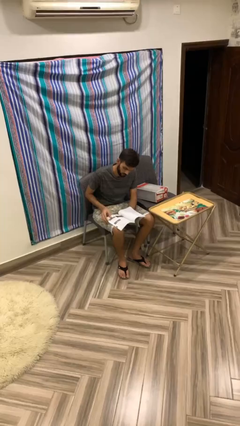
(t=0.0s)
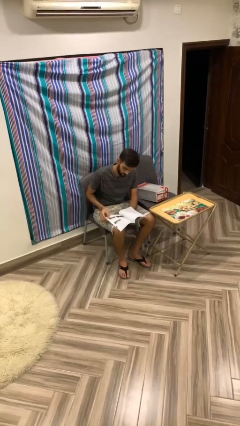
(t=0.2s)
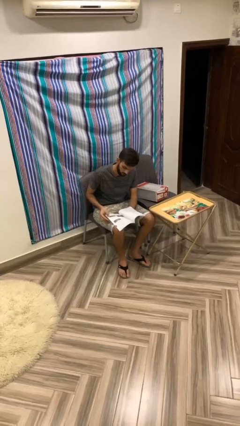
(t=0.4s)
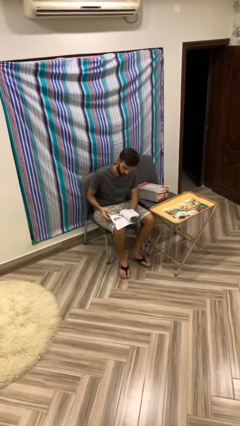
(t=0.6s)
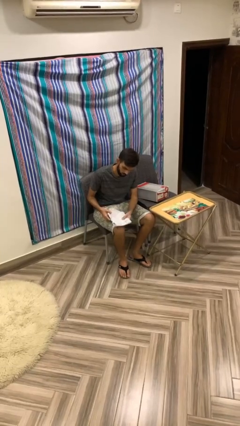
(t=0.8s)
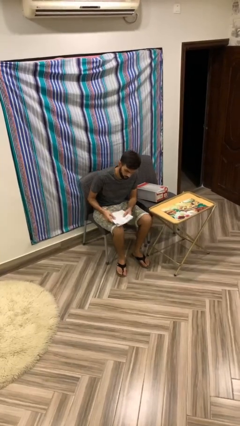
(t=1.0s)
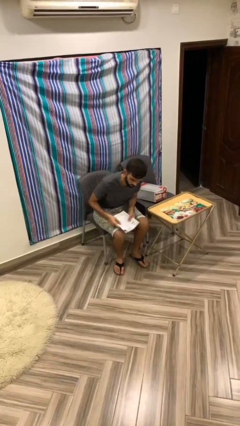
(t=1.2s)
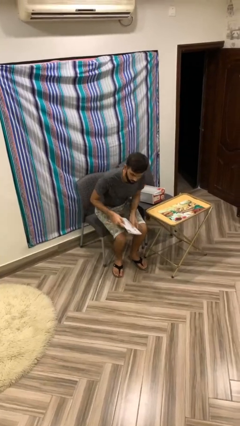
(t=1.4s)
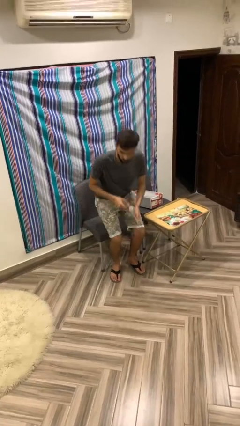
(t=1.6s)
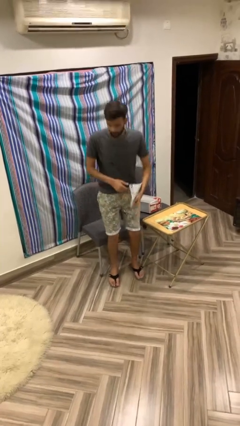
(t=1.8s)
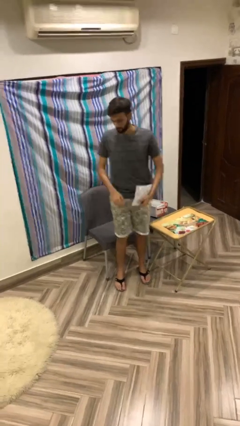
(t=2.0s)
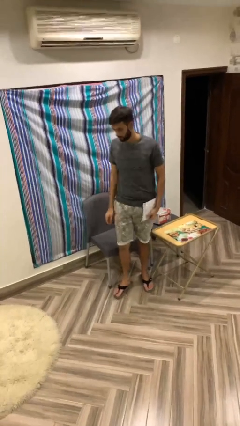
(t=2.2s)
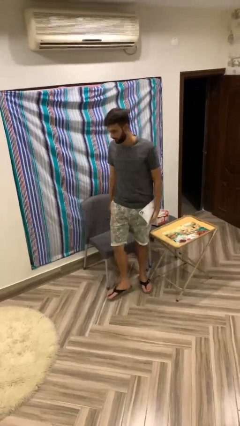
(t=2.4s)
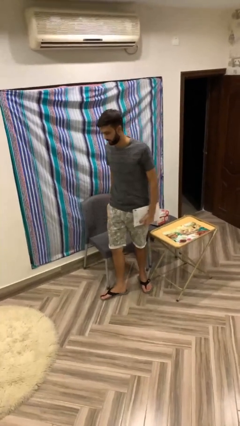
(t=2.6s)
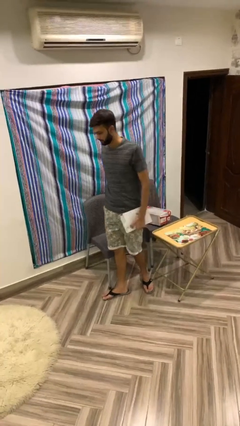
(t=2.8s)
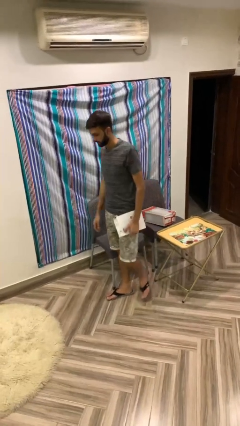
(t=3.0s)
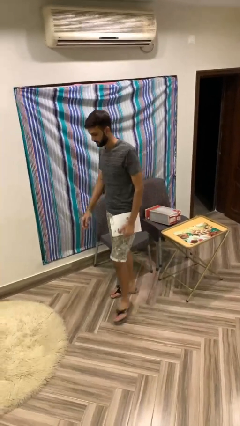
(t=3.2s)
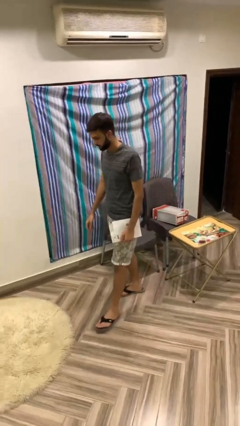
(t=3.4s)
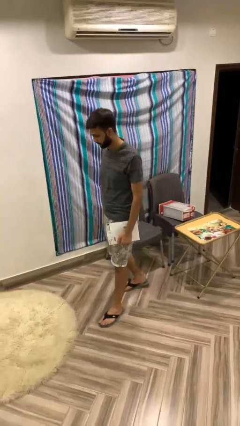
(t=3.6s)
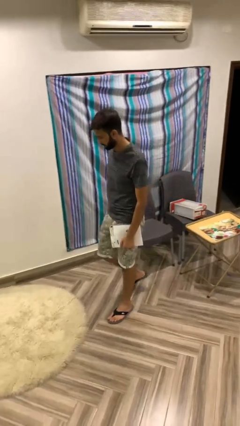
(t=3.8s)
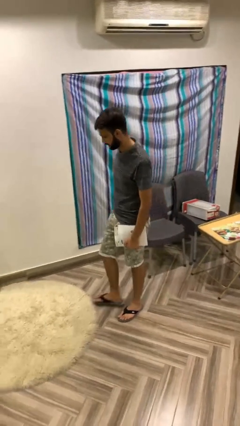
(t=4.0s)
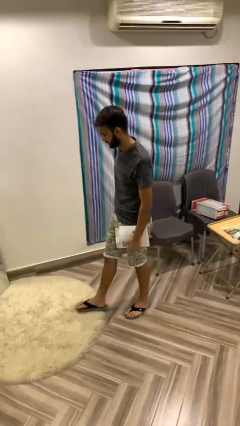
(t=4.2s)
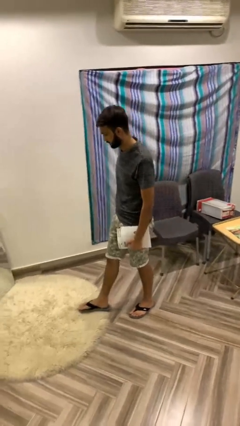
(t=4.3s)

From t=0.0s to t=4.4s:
person stands up

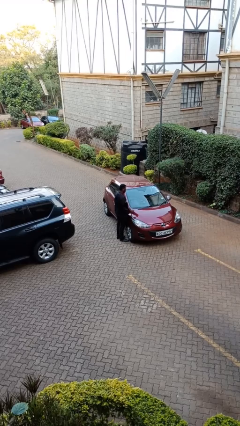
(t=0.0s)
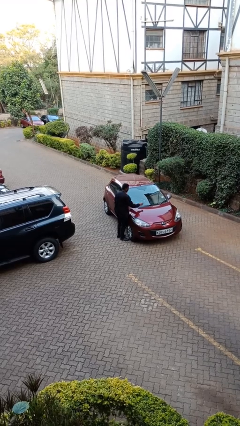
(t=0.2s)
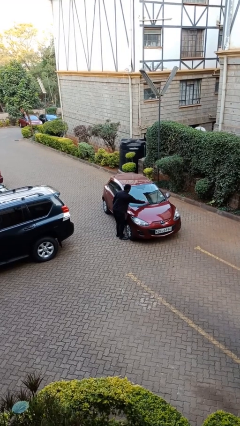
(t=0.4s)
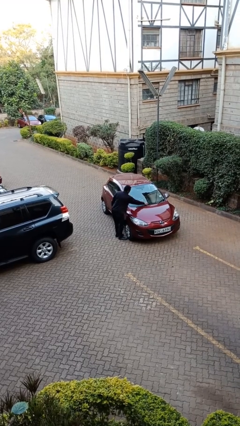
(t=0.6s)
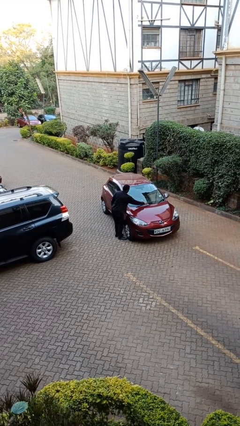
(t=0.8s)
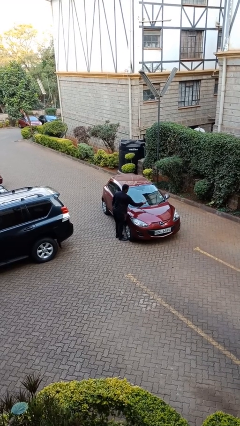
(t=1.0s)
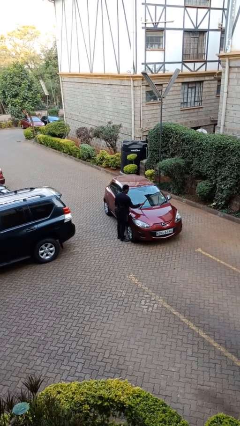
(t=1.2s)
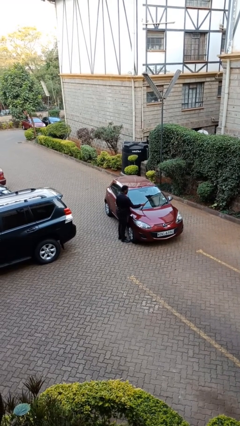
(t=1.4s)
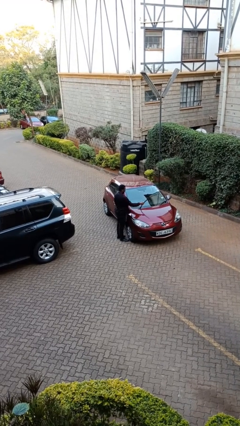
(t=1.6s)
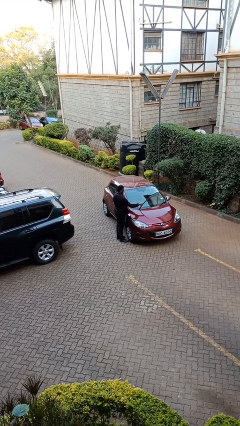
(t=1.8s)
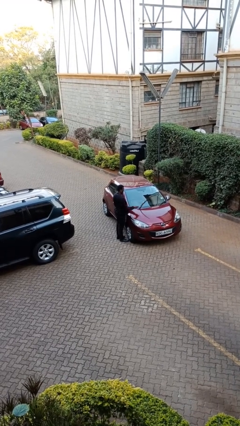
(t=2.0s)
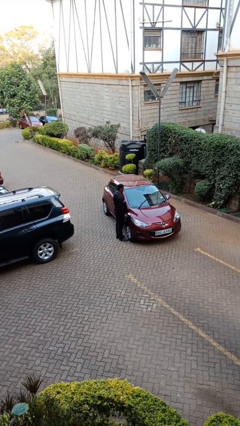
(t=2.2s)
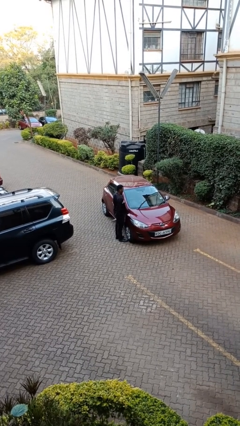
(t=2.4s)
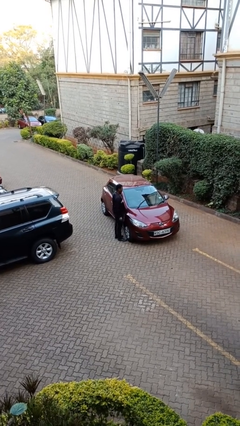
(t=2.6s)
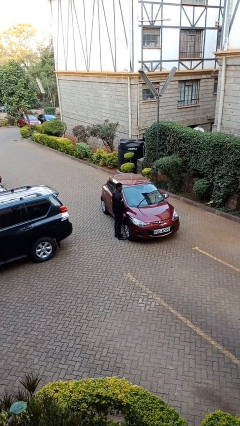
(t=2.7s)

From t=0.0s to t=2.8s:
person flips up car wipers

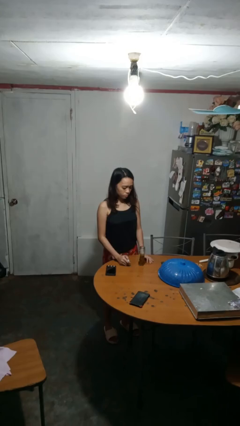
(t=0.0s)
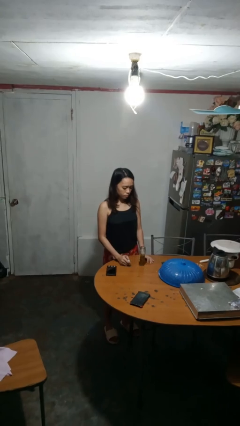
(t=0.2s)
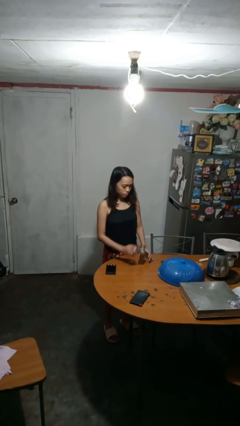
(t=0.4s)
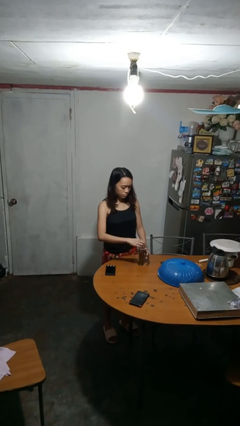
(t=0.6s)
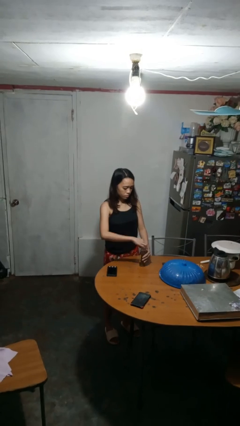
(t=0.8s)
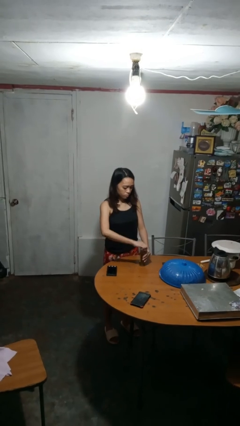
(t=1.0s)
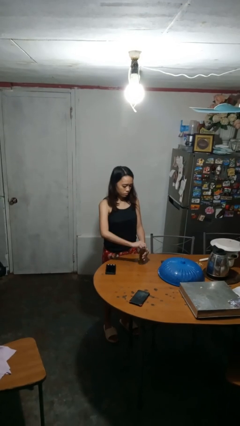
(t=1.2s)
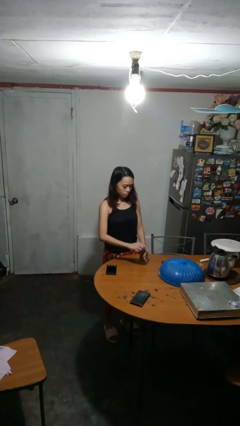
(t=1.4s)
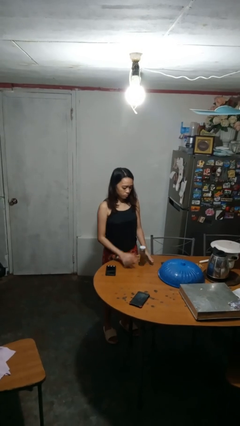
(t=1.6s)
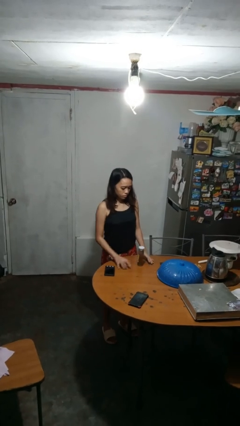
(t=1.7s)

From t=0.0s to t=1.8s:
person closes jar

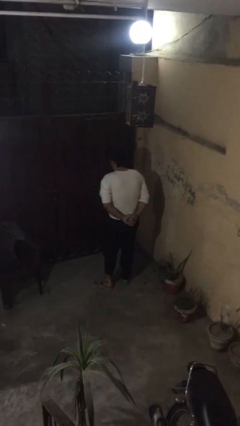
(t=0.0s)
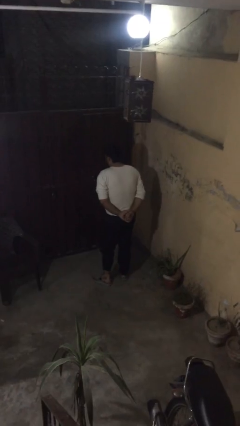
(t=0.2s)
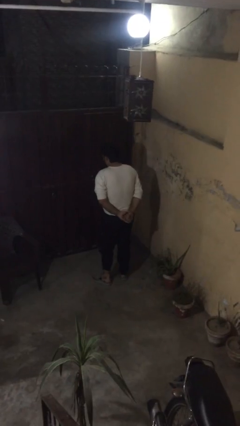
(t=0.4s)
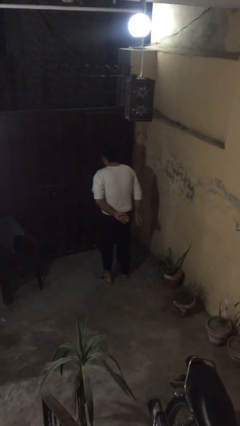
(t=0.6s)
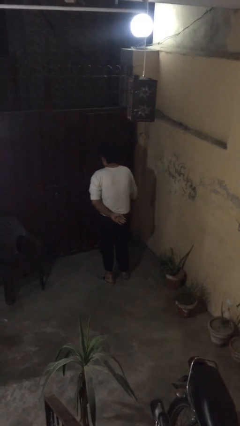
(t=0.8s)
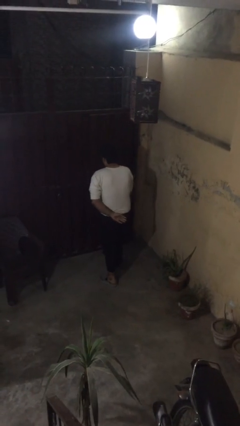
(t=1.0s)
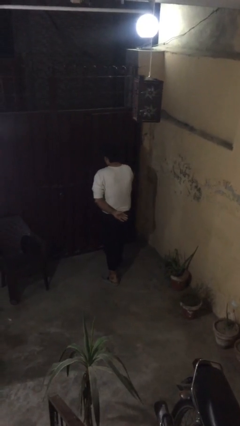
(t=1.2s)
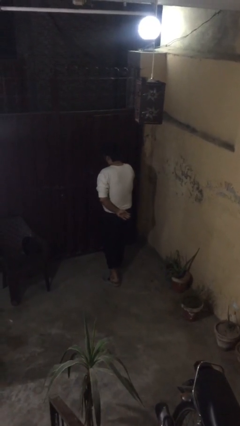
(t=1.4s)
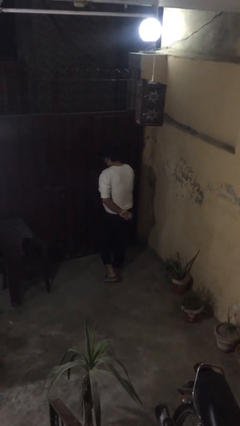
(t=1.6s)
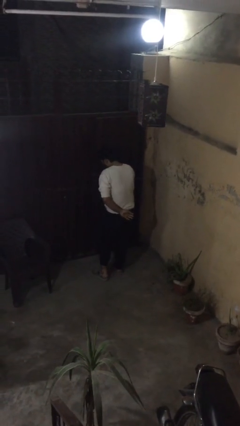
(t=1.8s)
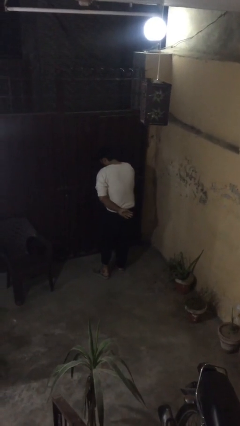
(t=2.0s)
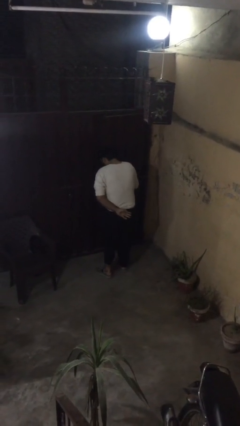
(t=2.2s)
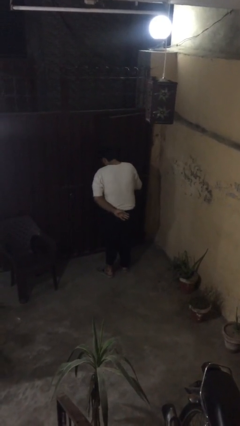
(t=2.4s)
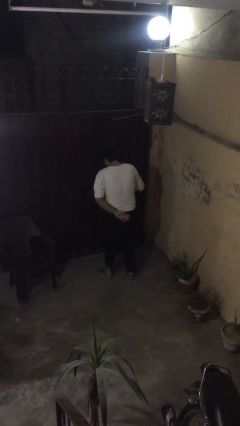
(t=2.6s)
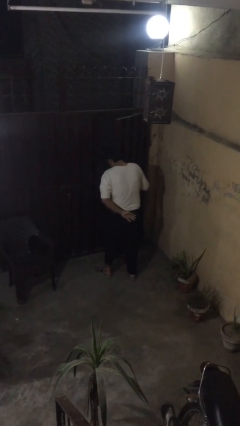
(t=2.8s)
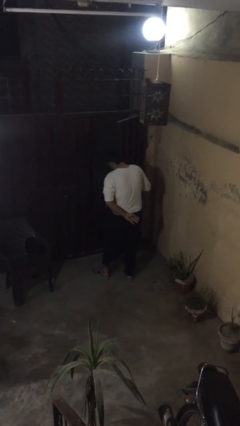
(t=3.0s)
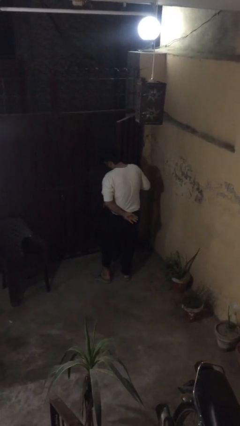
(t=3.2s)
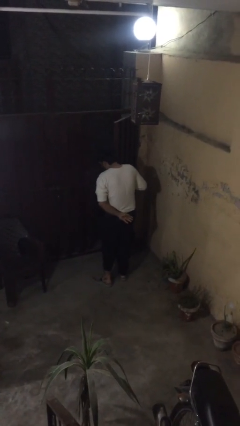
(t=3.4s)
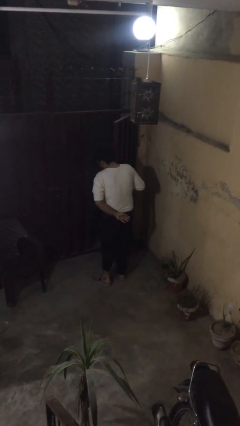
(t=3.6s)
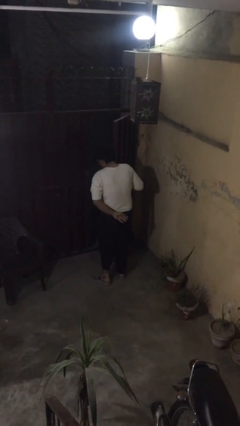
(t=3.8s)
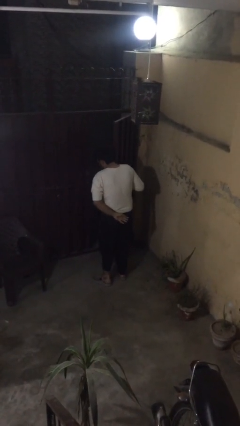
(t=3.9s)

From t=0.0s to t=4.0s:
person opens facility door

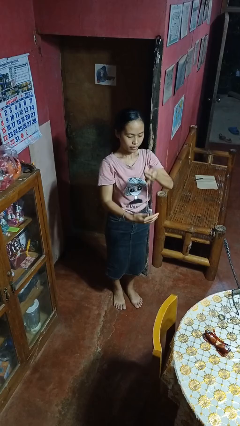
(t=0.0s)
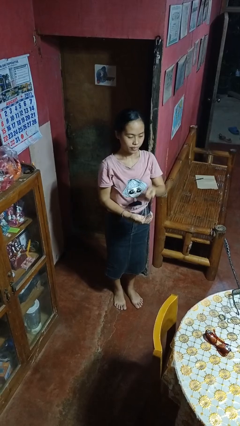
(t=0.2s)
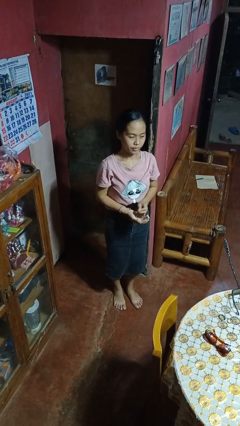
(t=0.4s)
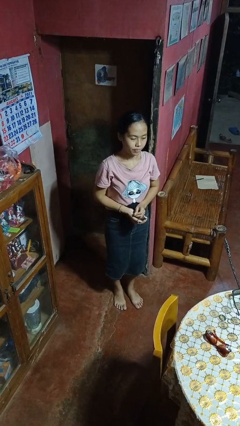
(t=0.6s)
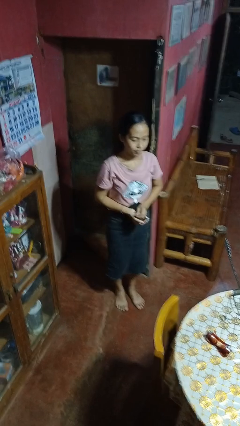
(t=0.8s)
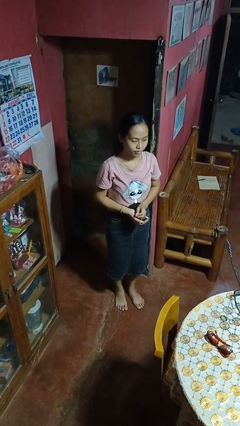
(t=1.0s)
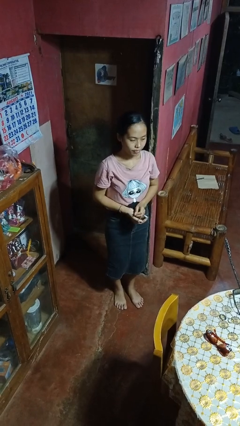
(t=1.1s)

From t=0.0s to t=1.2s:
person takes off necklace

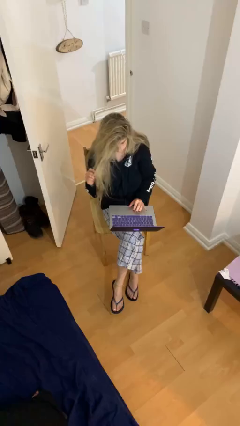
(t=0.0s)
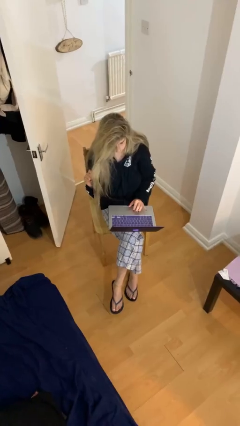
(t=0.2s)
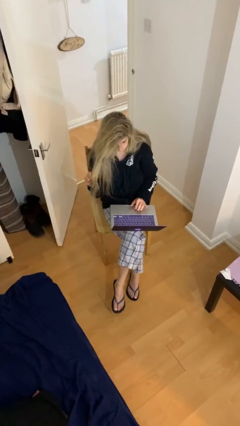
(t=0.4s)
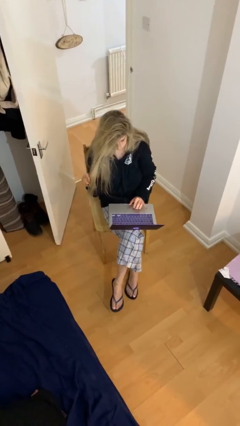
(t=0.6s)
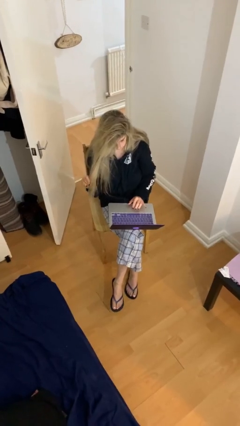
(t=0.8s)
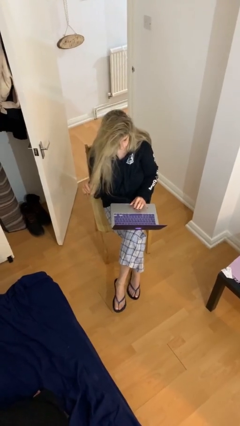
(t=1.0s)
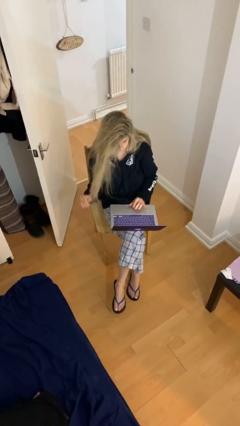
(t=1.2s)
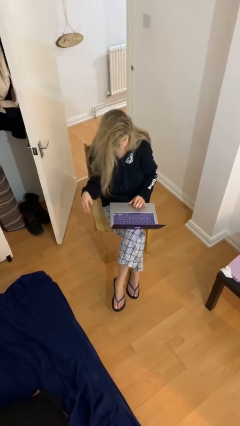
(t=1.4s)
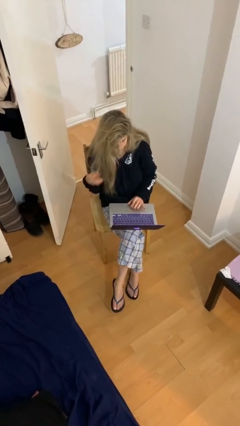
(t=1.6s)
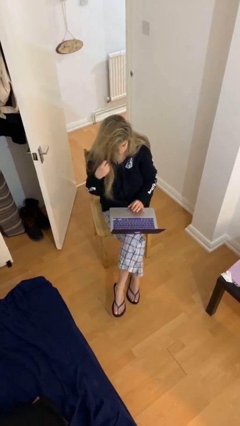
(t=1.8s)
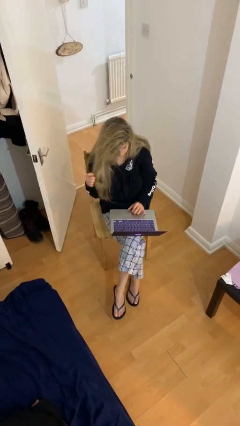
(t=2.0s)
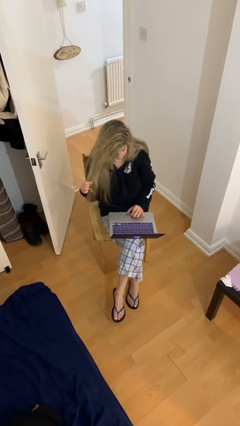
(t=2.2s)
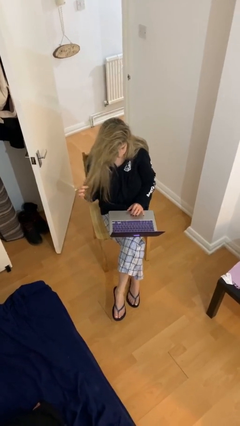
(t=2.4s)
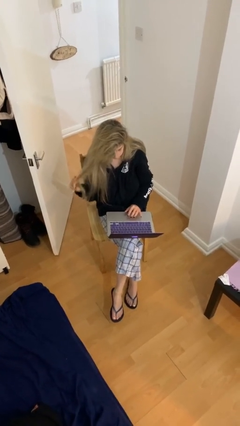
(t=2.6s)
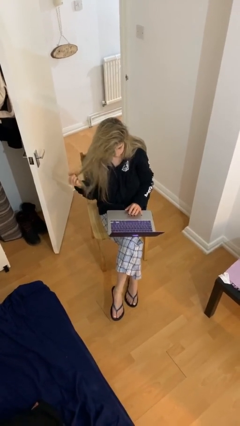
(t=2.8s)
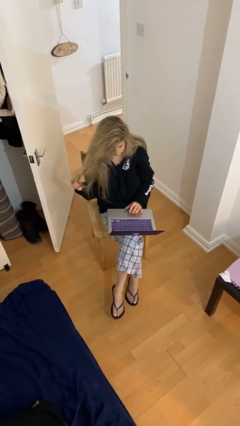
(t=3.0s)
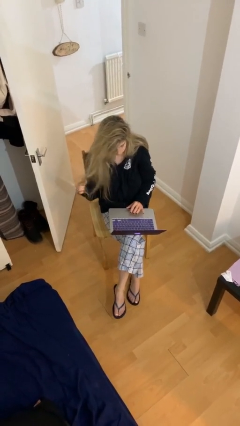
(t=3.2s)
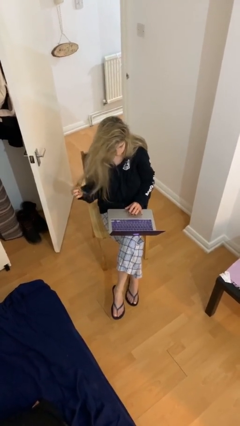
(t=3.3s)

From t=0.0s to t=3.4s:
person interacts with laptop
